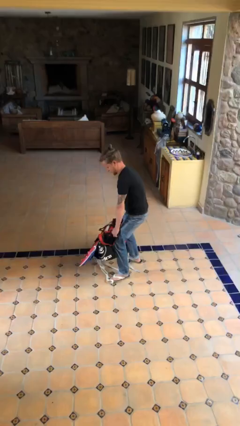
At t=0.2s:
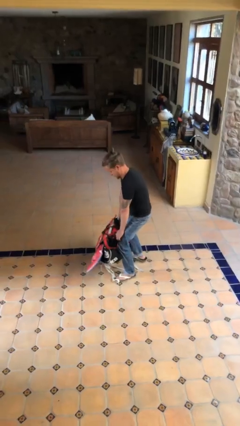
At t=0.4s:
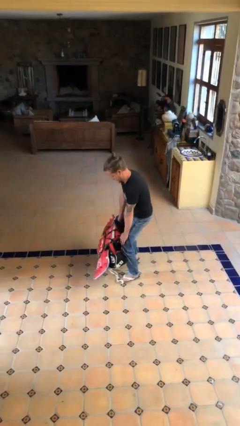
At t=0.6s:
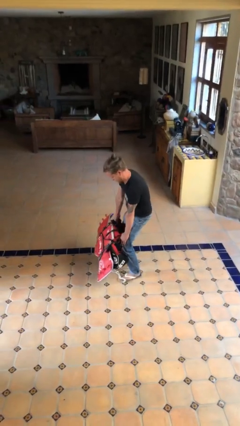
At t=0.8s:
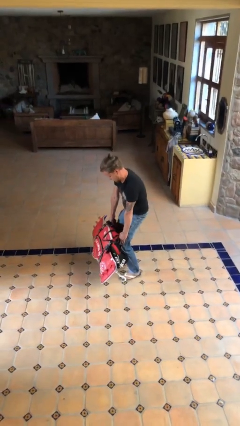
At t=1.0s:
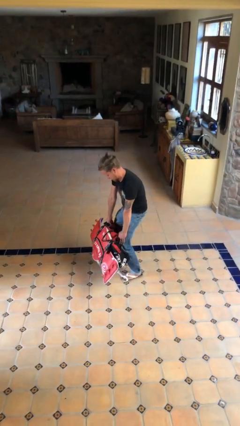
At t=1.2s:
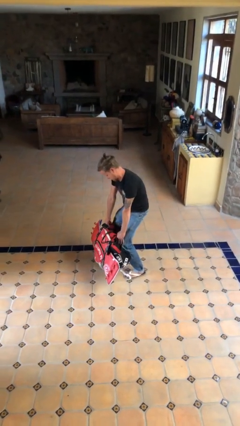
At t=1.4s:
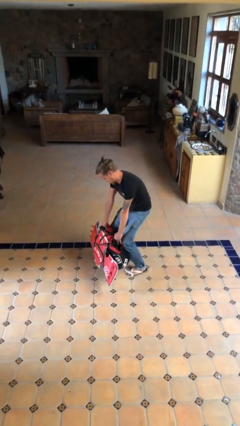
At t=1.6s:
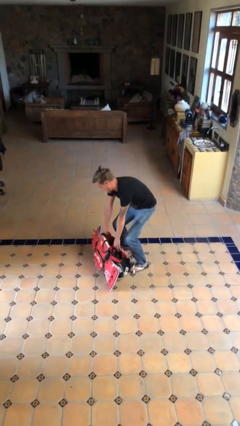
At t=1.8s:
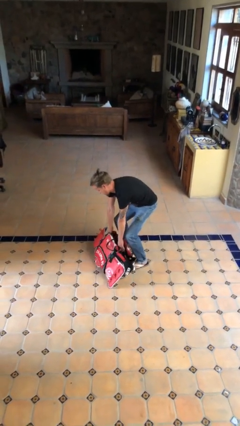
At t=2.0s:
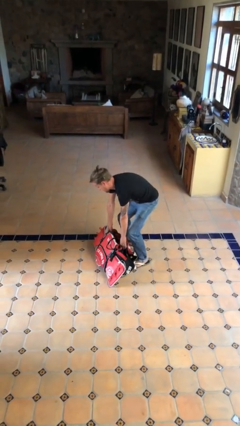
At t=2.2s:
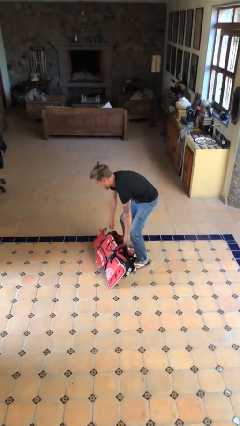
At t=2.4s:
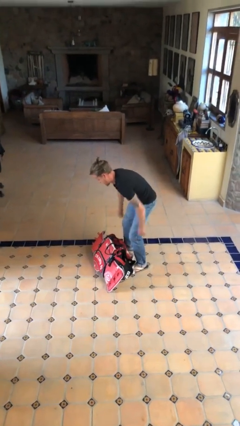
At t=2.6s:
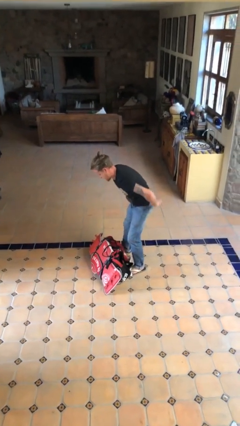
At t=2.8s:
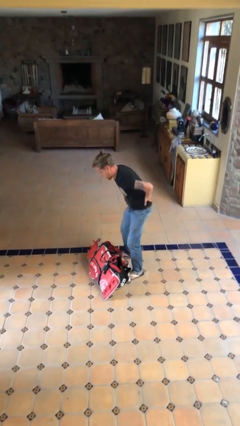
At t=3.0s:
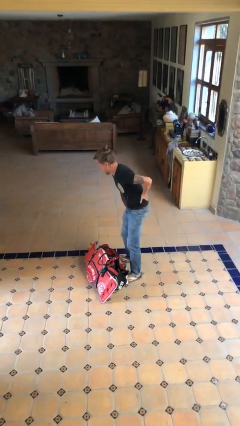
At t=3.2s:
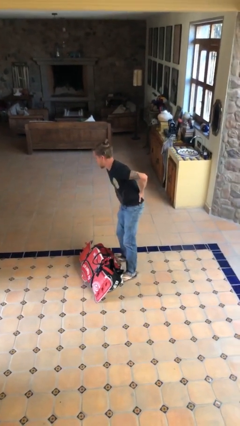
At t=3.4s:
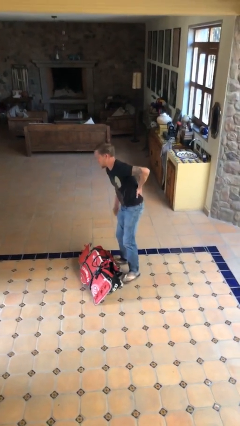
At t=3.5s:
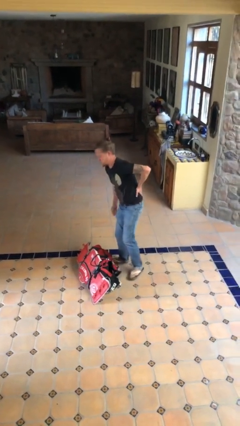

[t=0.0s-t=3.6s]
person puts down object on floor

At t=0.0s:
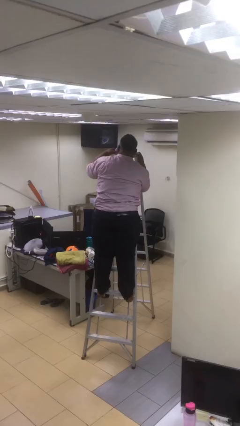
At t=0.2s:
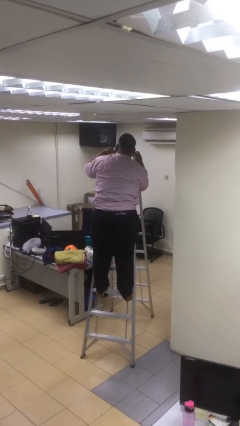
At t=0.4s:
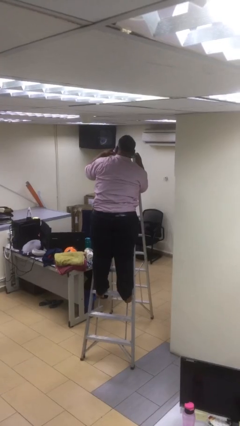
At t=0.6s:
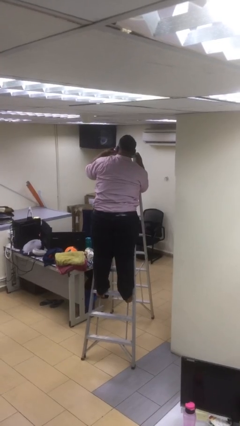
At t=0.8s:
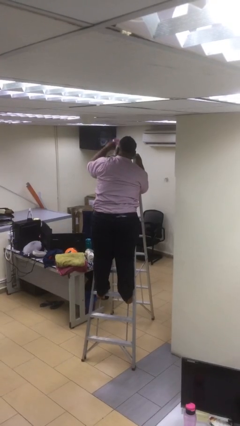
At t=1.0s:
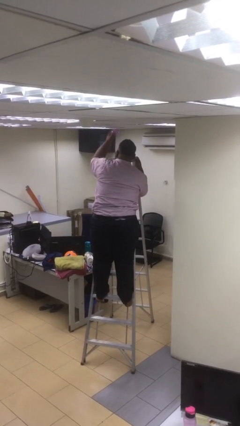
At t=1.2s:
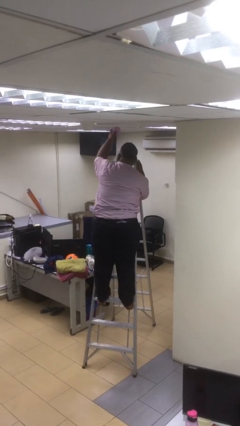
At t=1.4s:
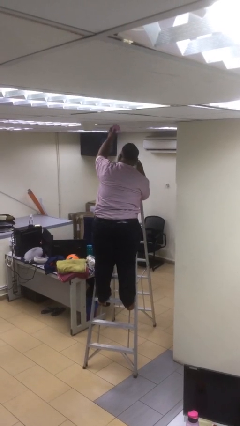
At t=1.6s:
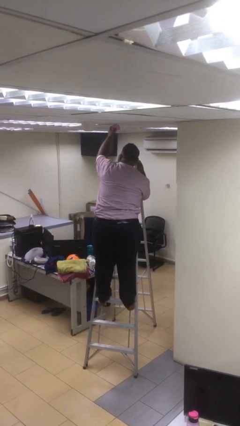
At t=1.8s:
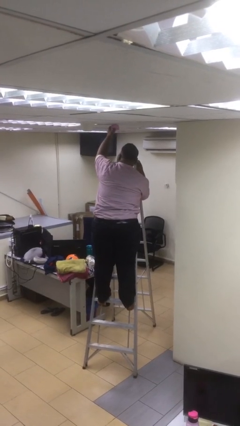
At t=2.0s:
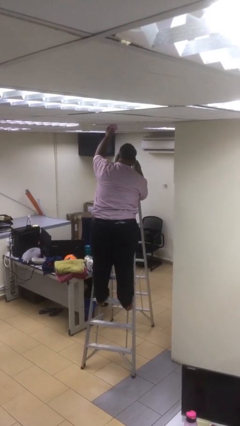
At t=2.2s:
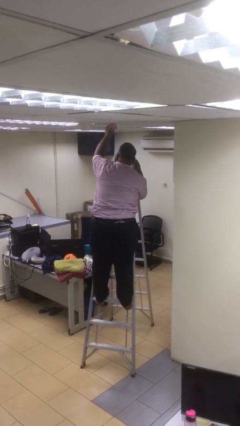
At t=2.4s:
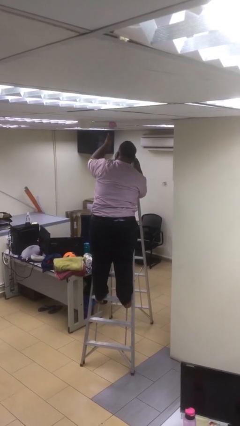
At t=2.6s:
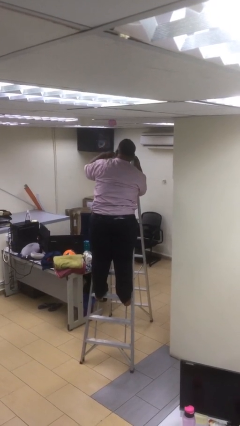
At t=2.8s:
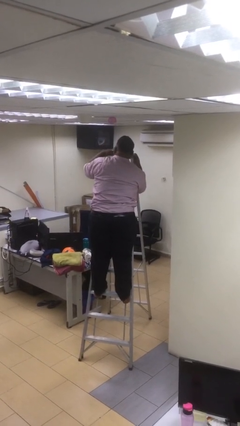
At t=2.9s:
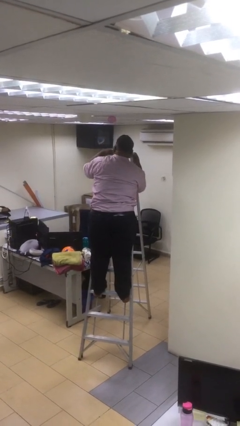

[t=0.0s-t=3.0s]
person puts up smoke detector

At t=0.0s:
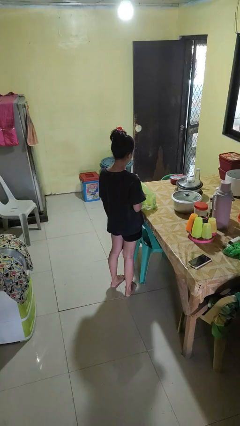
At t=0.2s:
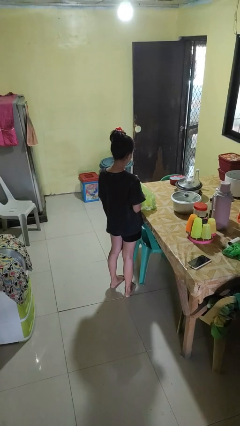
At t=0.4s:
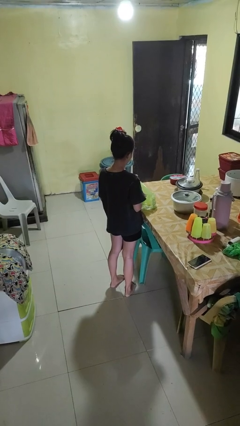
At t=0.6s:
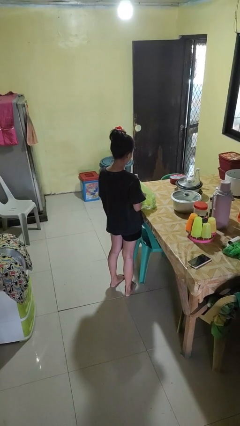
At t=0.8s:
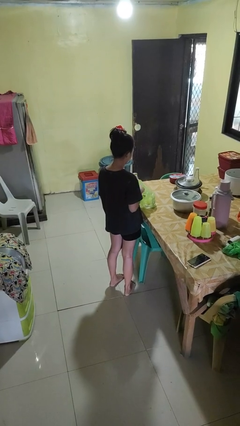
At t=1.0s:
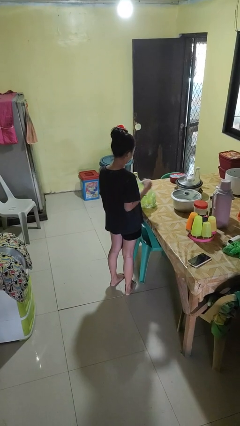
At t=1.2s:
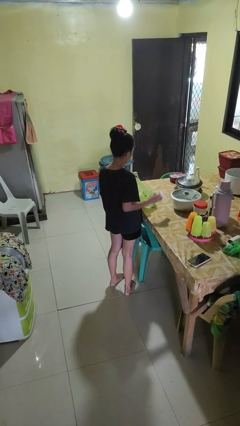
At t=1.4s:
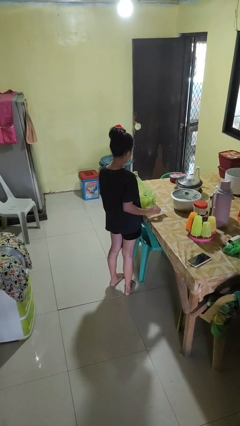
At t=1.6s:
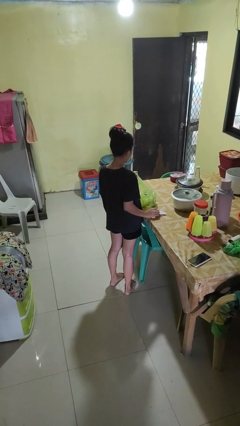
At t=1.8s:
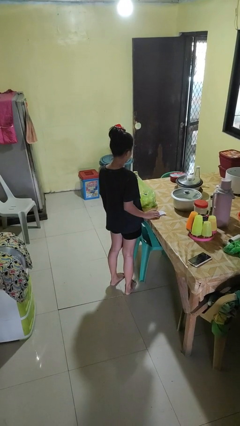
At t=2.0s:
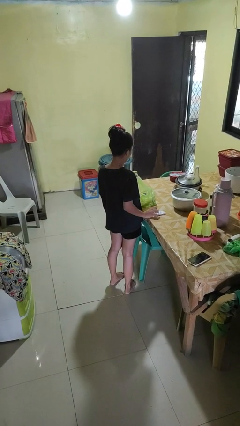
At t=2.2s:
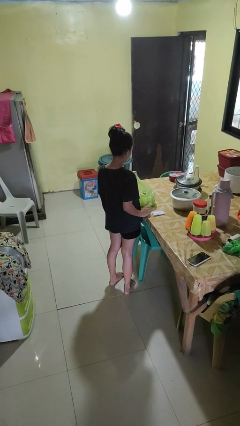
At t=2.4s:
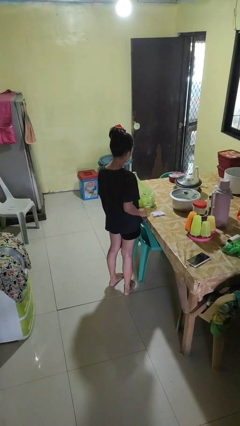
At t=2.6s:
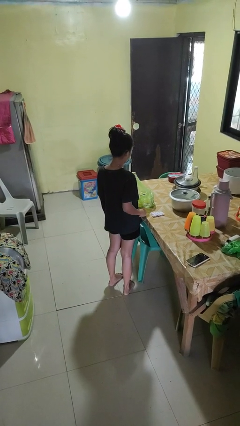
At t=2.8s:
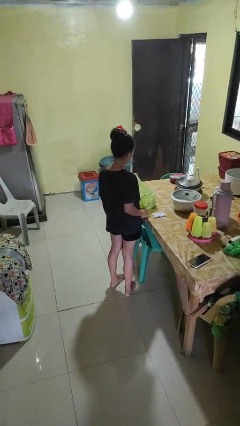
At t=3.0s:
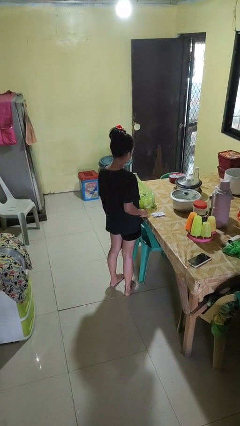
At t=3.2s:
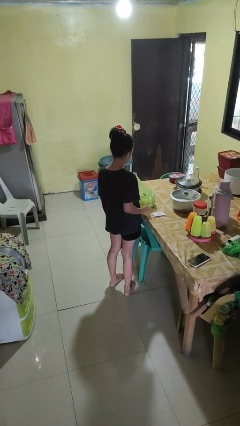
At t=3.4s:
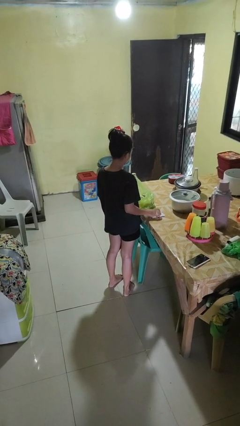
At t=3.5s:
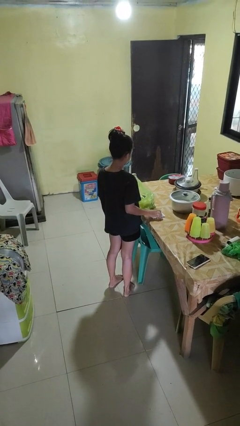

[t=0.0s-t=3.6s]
person takes object from bag

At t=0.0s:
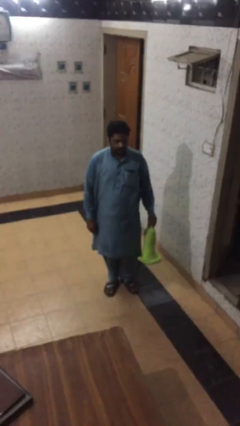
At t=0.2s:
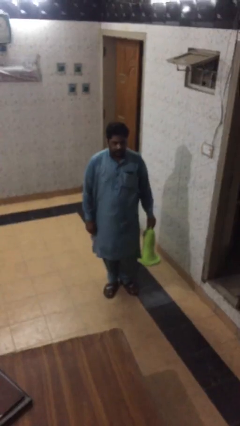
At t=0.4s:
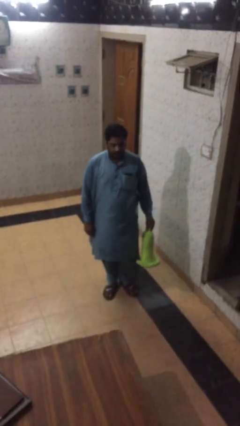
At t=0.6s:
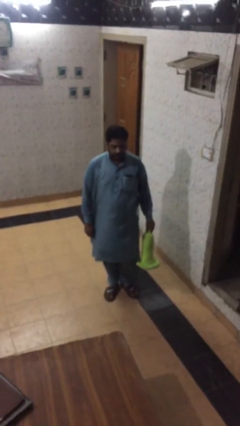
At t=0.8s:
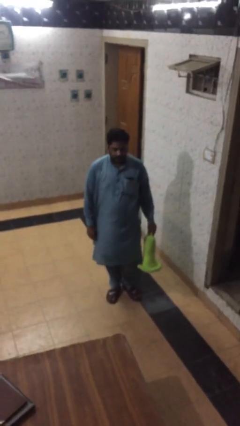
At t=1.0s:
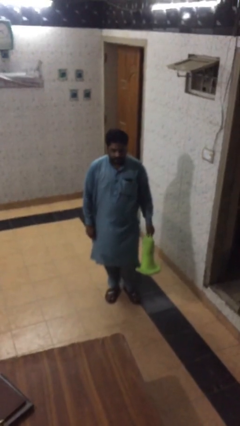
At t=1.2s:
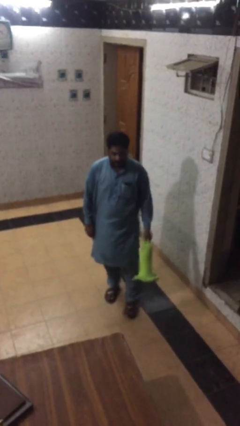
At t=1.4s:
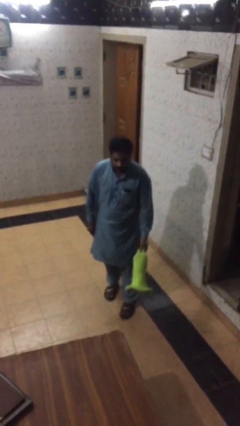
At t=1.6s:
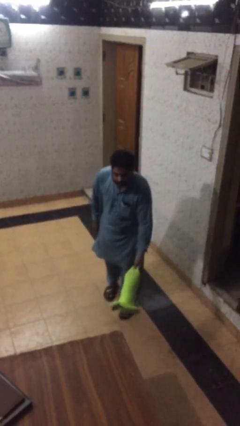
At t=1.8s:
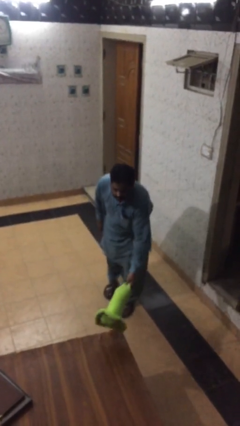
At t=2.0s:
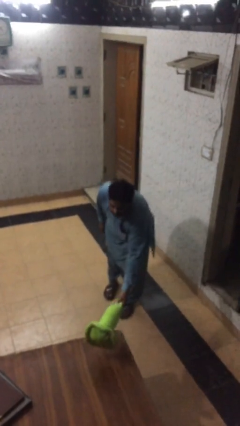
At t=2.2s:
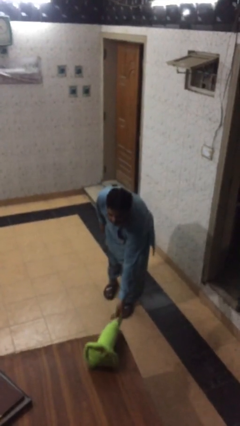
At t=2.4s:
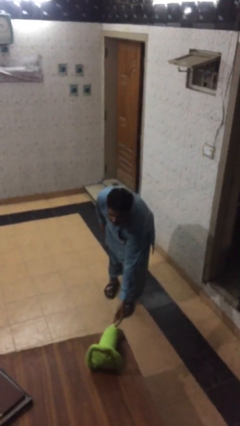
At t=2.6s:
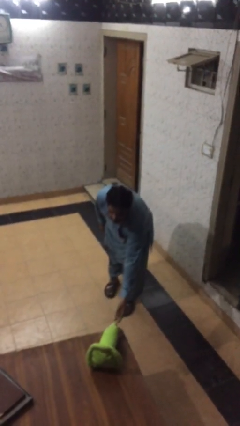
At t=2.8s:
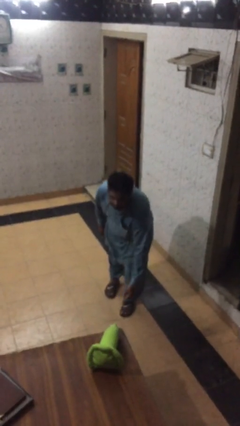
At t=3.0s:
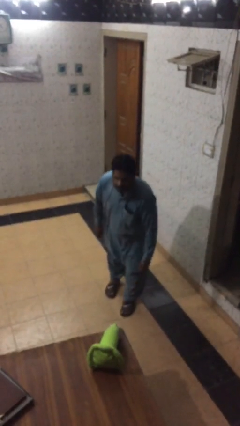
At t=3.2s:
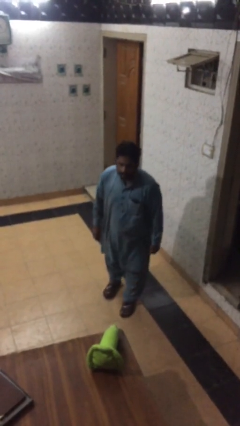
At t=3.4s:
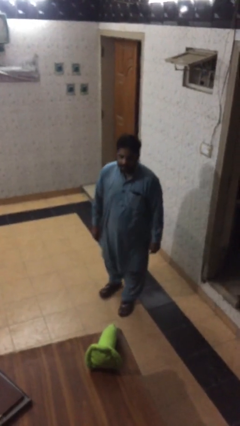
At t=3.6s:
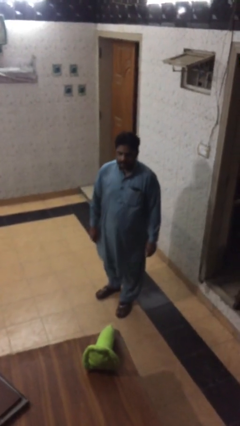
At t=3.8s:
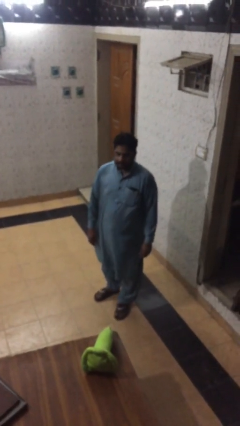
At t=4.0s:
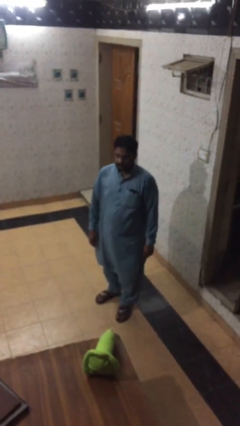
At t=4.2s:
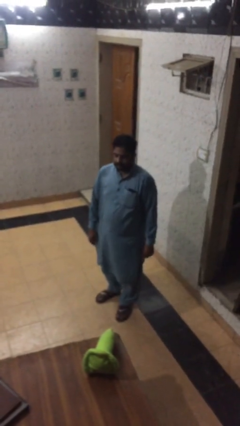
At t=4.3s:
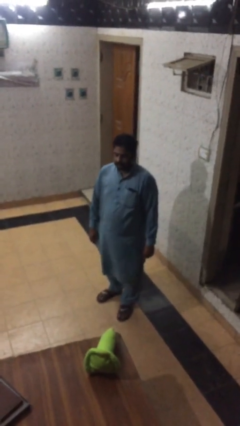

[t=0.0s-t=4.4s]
person puts down object on table

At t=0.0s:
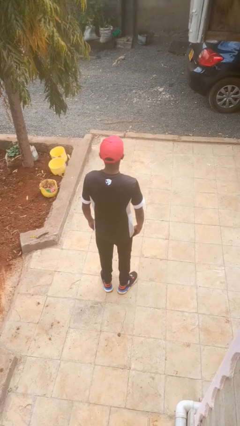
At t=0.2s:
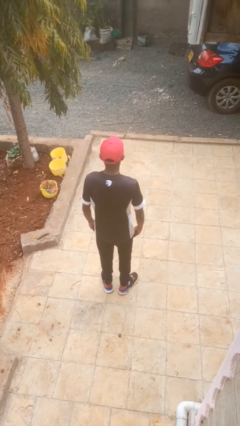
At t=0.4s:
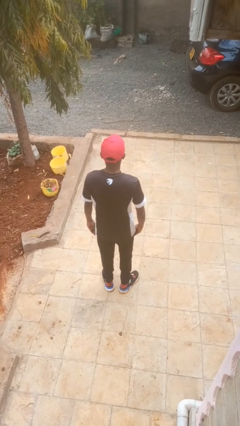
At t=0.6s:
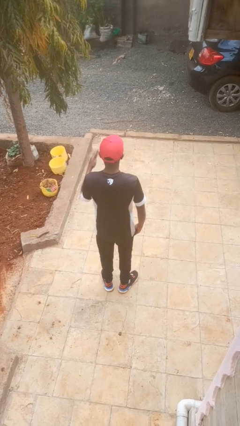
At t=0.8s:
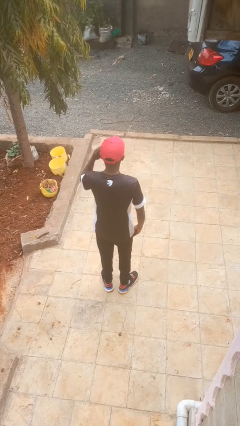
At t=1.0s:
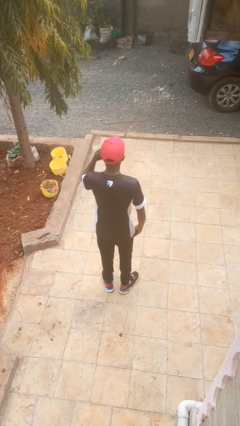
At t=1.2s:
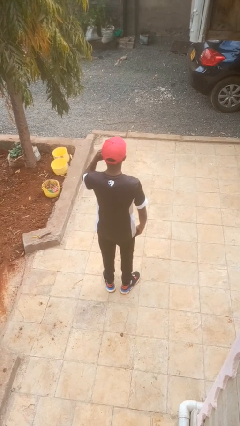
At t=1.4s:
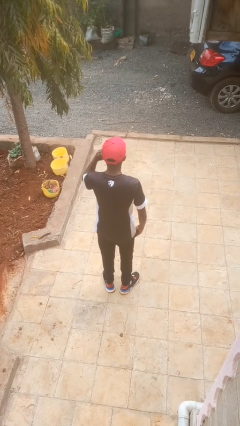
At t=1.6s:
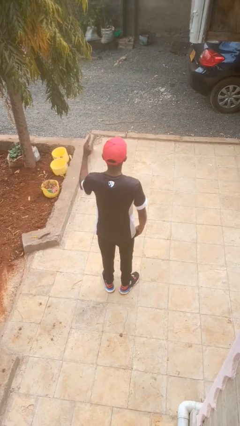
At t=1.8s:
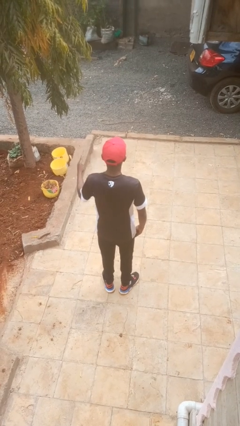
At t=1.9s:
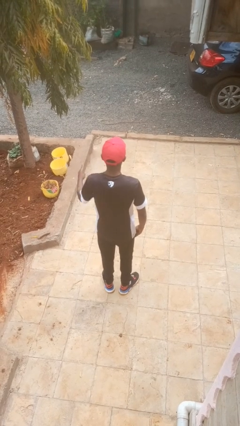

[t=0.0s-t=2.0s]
person salutes

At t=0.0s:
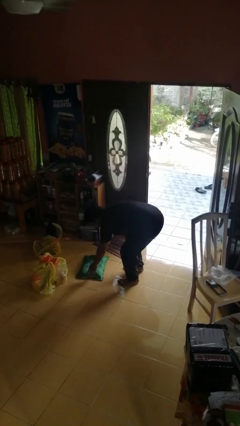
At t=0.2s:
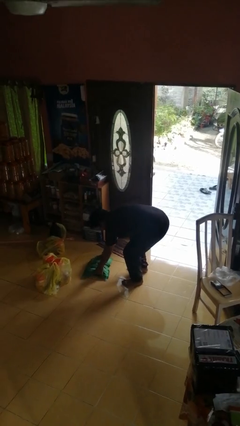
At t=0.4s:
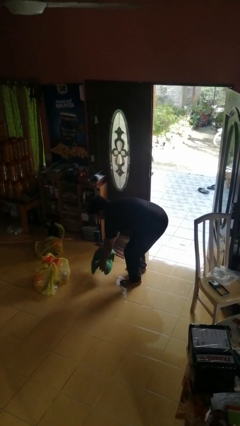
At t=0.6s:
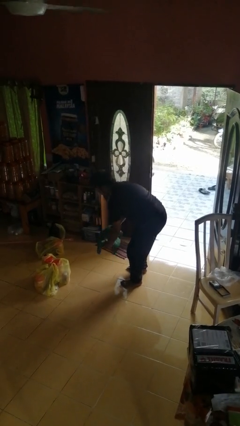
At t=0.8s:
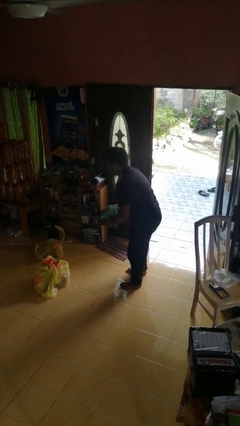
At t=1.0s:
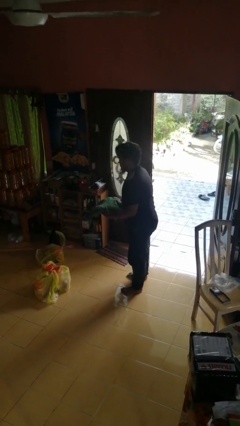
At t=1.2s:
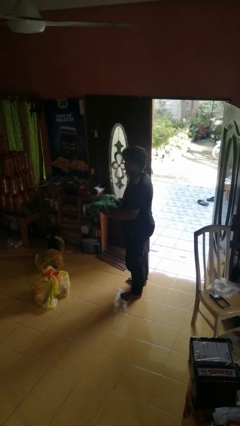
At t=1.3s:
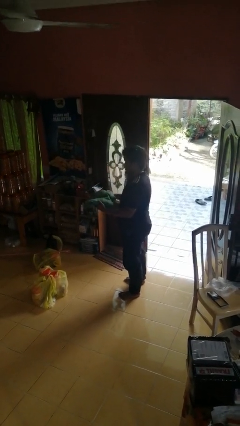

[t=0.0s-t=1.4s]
person picks up object from floor
